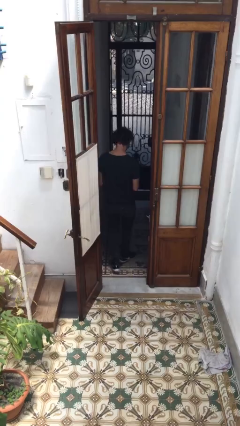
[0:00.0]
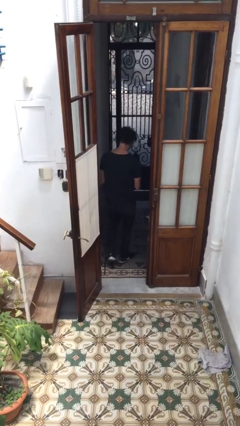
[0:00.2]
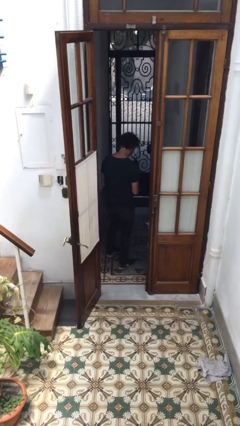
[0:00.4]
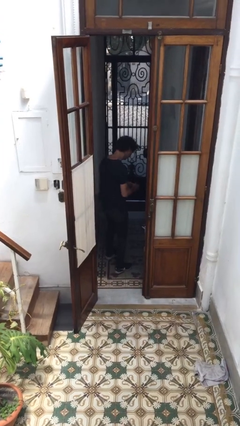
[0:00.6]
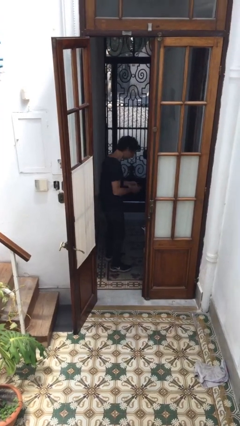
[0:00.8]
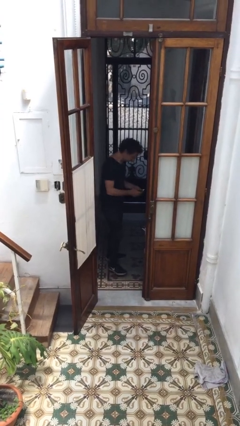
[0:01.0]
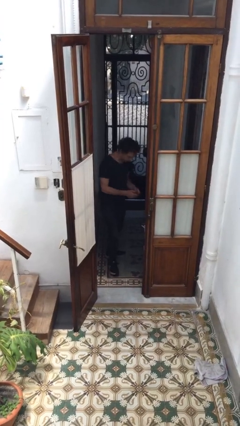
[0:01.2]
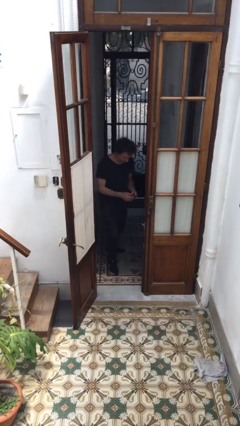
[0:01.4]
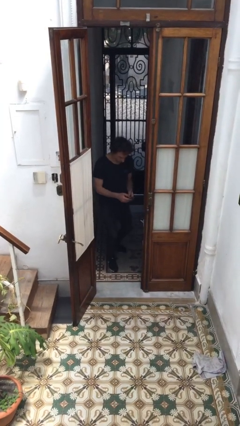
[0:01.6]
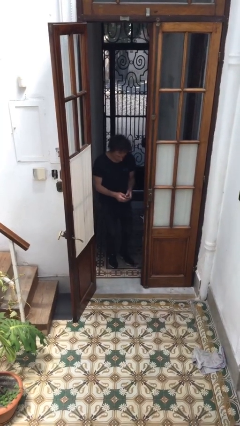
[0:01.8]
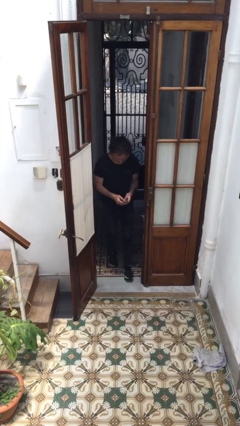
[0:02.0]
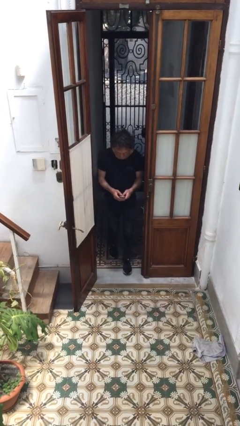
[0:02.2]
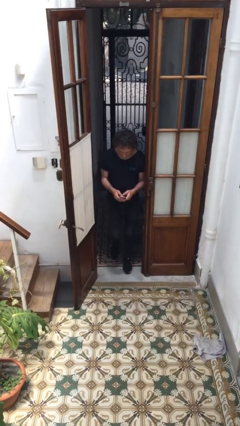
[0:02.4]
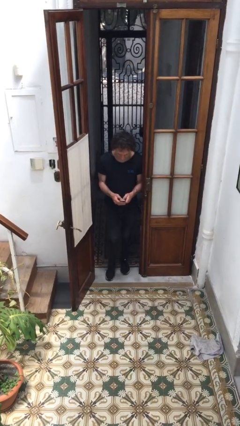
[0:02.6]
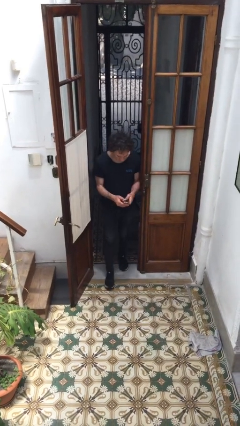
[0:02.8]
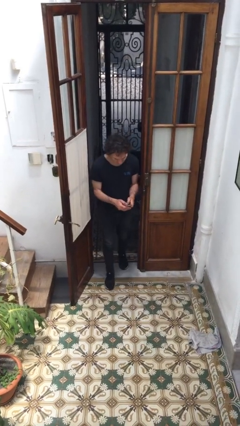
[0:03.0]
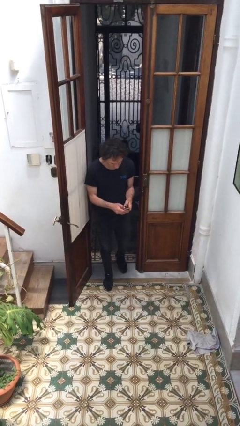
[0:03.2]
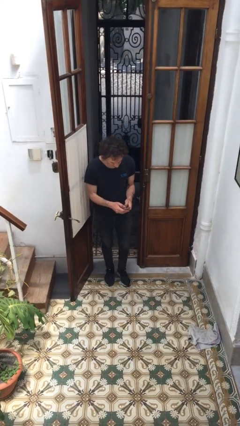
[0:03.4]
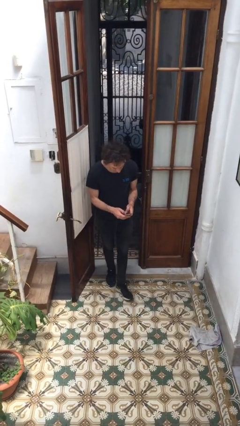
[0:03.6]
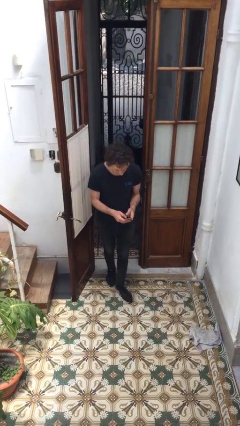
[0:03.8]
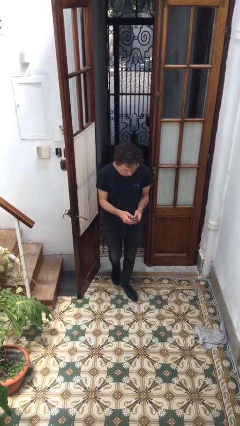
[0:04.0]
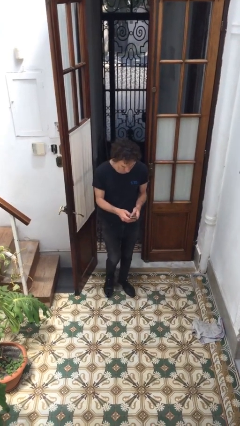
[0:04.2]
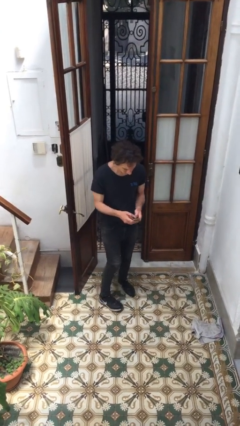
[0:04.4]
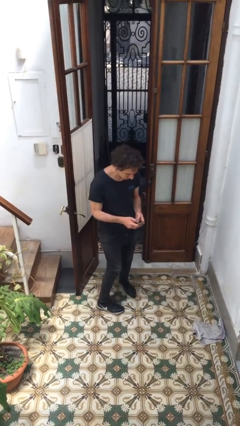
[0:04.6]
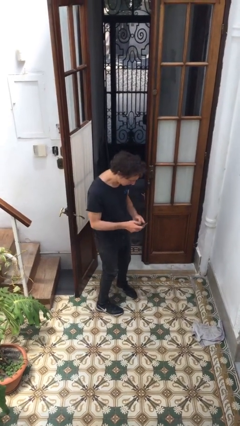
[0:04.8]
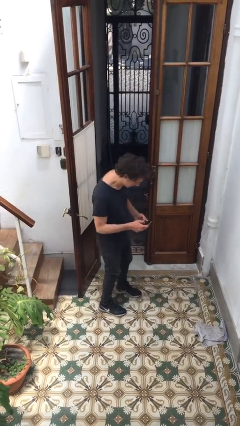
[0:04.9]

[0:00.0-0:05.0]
person enters scene through structure

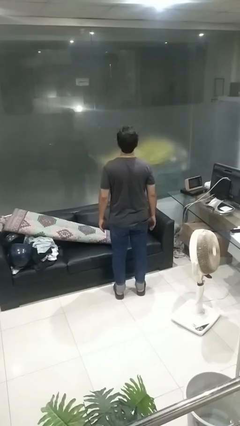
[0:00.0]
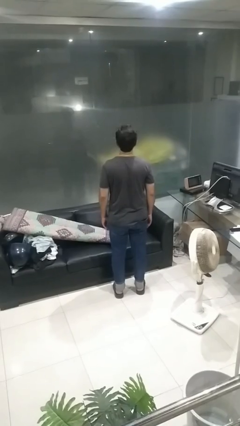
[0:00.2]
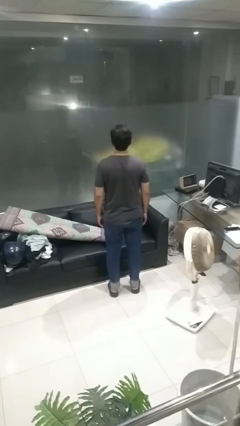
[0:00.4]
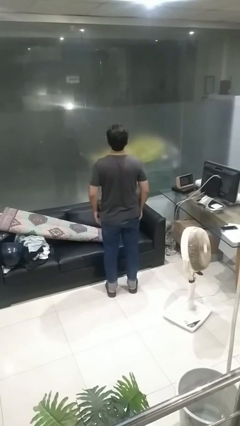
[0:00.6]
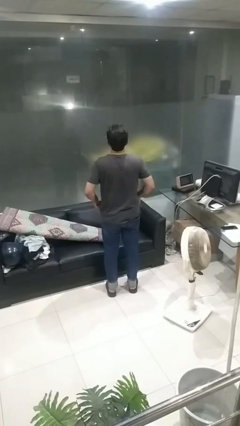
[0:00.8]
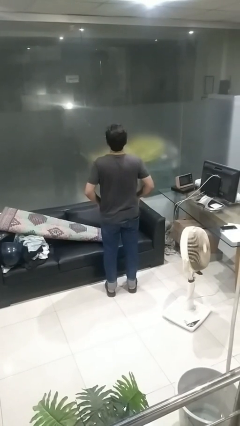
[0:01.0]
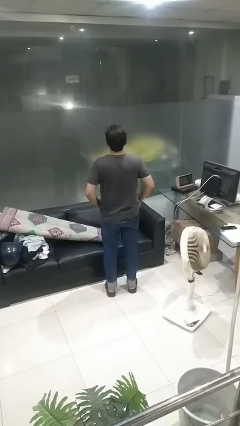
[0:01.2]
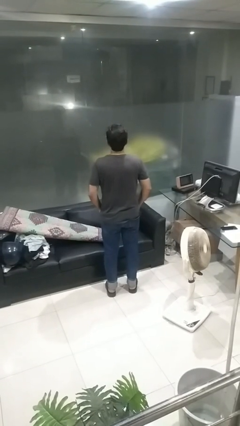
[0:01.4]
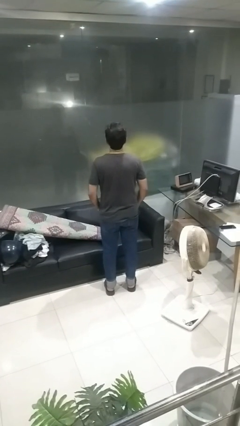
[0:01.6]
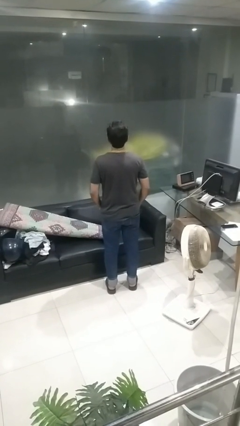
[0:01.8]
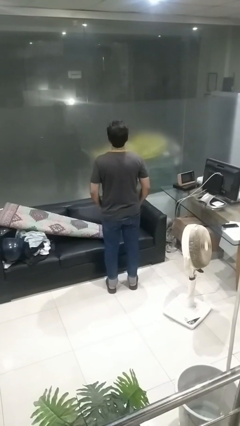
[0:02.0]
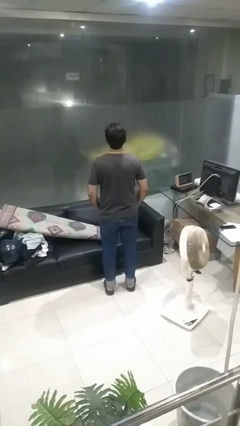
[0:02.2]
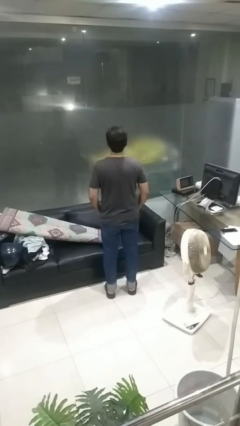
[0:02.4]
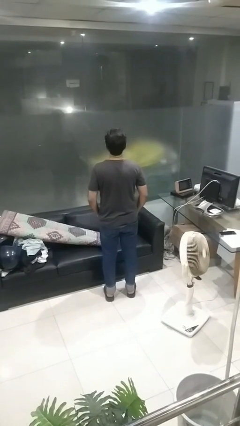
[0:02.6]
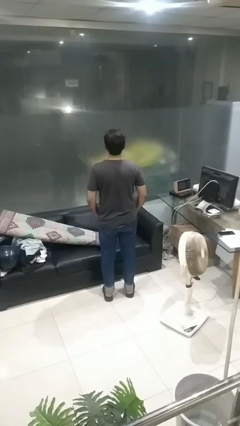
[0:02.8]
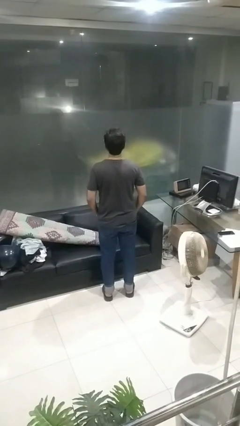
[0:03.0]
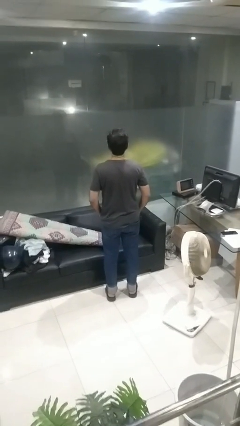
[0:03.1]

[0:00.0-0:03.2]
person puts hands in back pockets

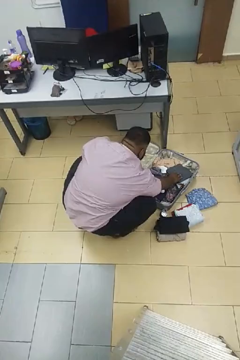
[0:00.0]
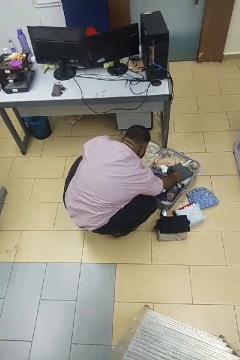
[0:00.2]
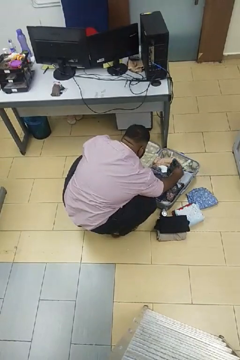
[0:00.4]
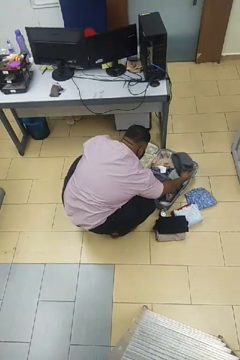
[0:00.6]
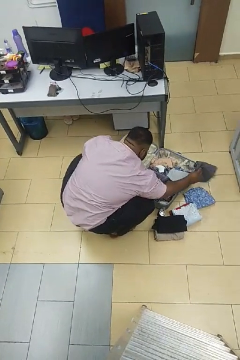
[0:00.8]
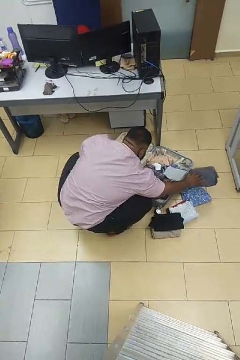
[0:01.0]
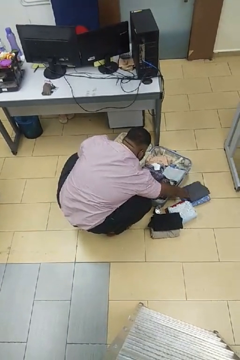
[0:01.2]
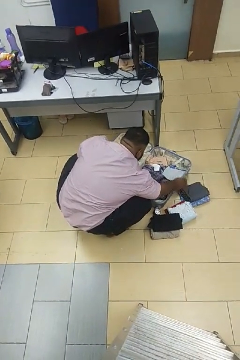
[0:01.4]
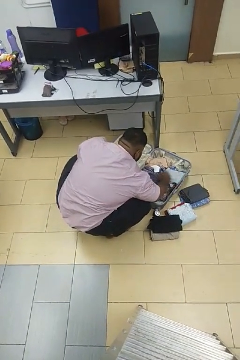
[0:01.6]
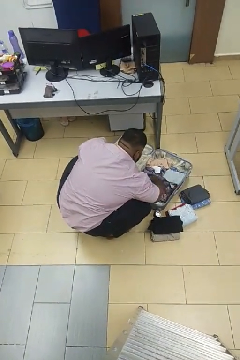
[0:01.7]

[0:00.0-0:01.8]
person unloads clothes from suitcase

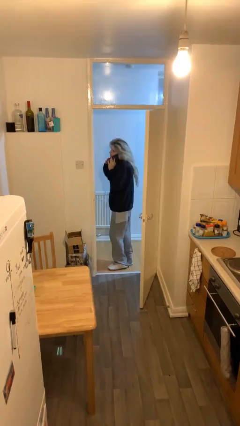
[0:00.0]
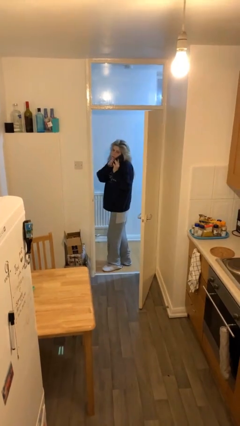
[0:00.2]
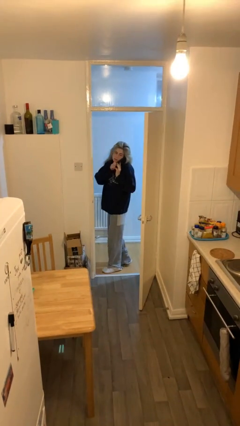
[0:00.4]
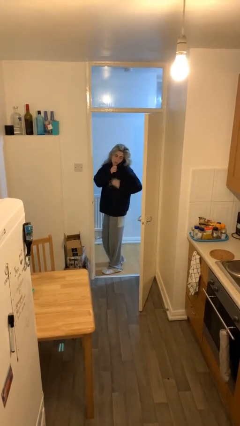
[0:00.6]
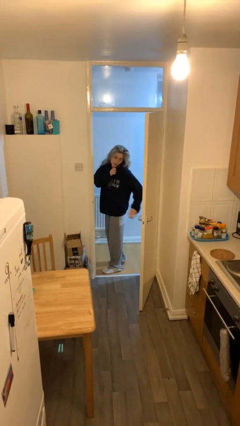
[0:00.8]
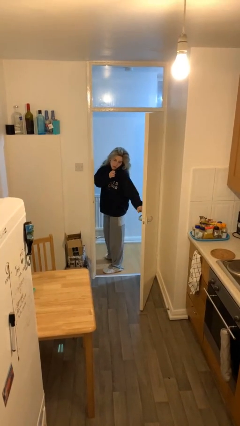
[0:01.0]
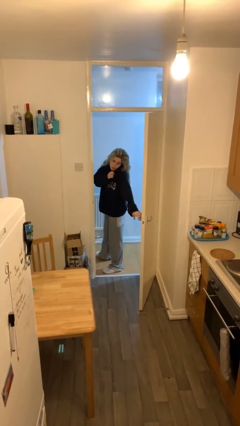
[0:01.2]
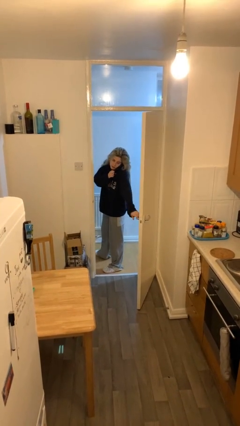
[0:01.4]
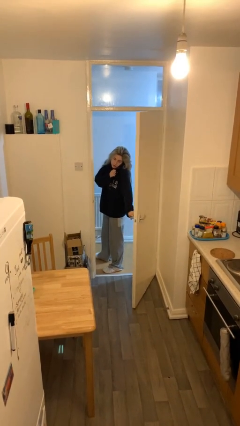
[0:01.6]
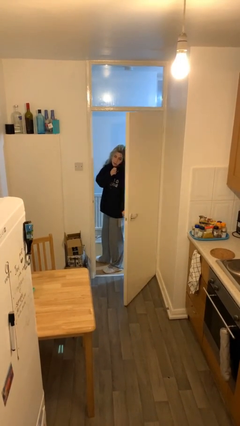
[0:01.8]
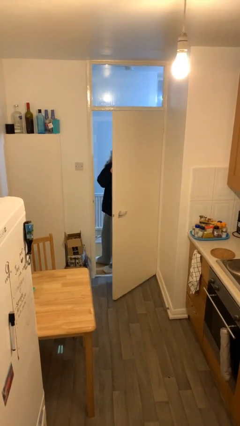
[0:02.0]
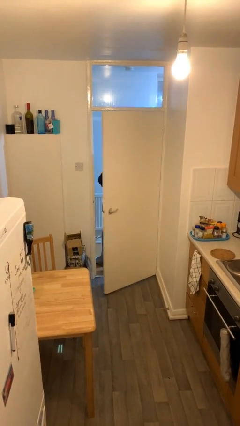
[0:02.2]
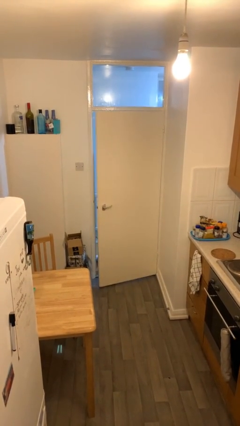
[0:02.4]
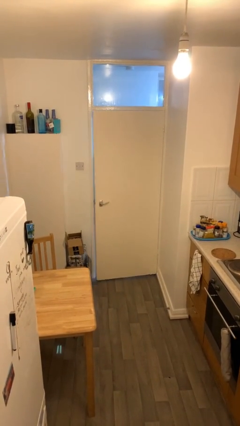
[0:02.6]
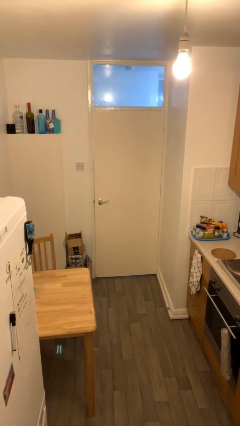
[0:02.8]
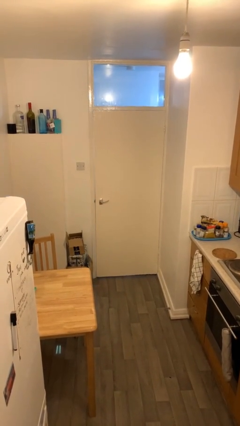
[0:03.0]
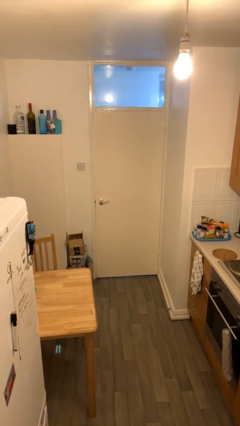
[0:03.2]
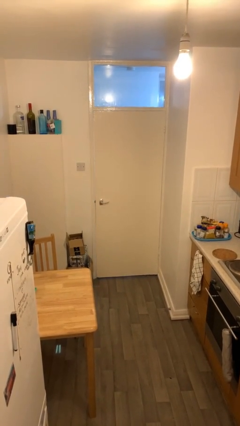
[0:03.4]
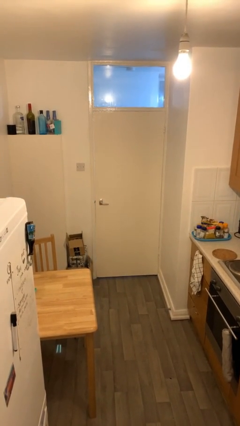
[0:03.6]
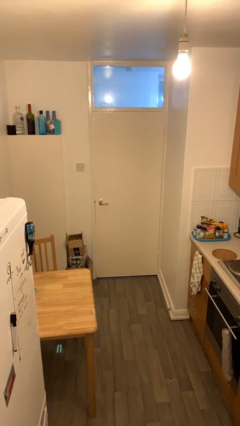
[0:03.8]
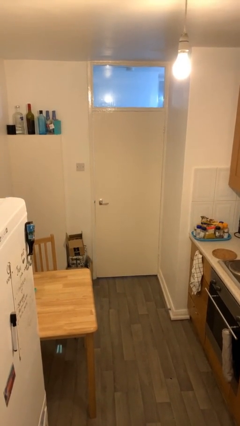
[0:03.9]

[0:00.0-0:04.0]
person closes facility door

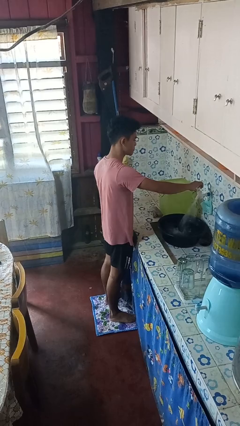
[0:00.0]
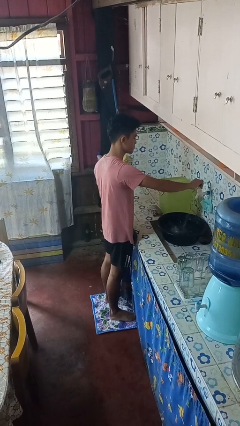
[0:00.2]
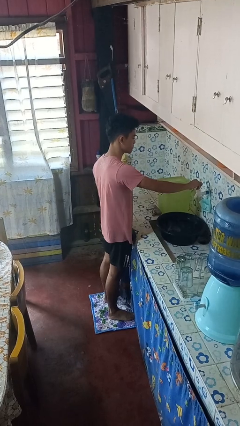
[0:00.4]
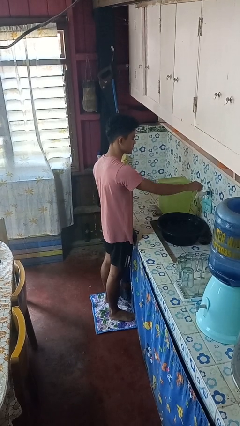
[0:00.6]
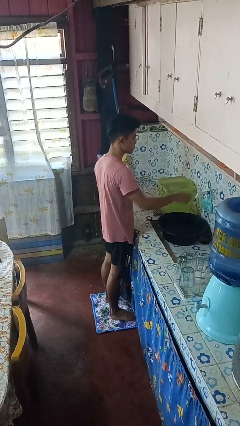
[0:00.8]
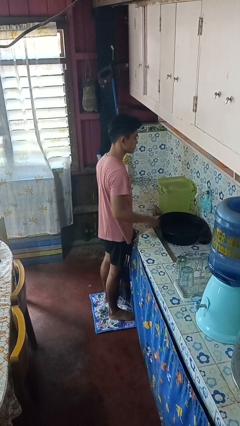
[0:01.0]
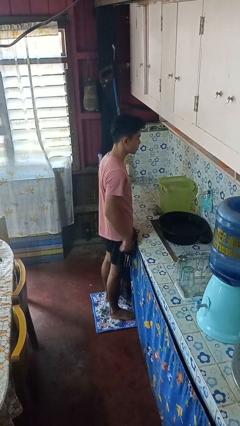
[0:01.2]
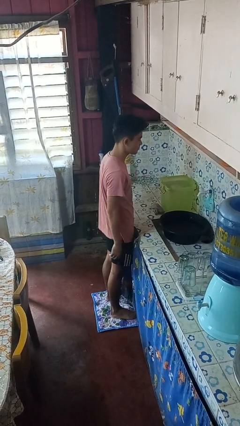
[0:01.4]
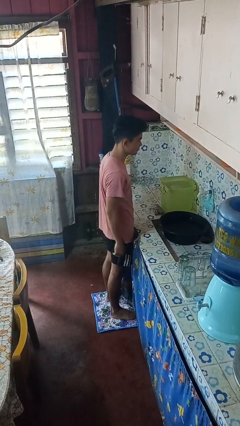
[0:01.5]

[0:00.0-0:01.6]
person turns off faucet

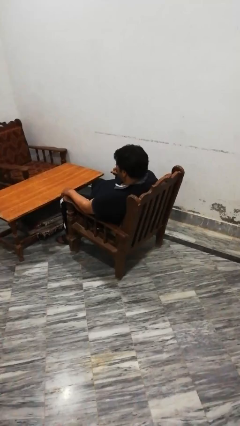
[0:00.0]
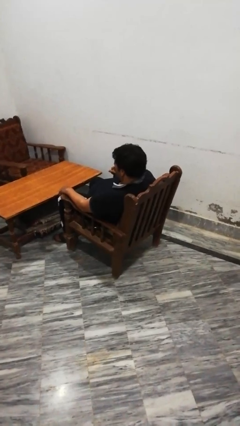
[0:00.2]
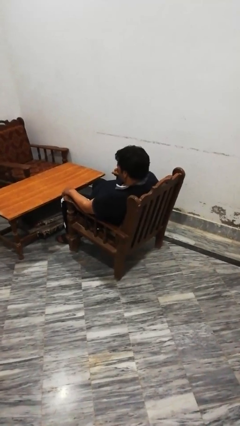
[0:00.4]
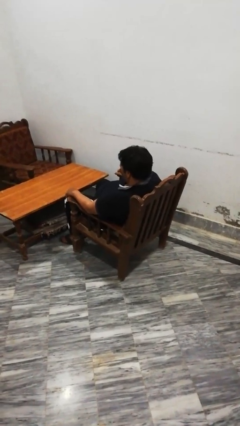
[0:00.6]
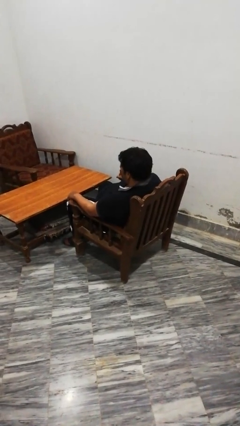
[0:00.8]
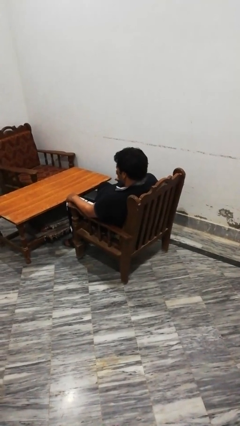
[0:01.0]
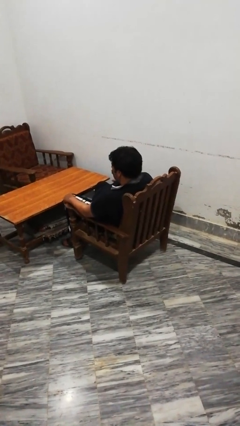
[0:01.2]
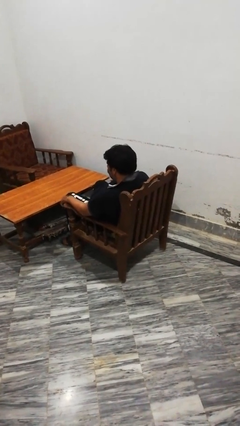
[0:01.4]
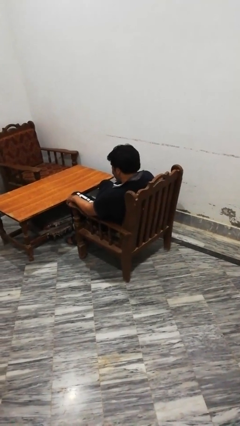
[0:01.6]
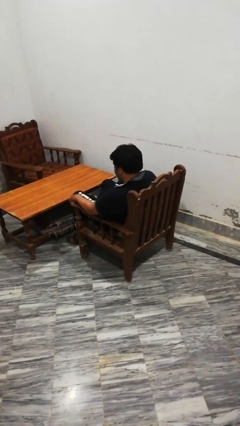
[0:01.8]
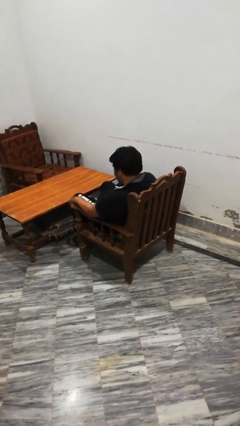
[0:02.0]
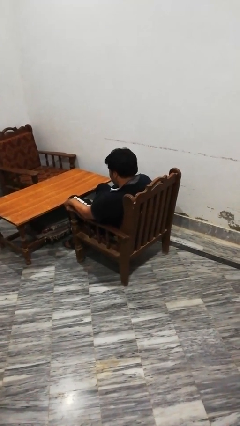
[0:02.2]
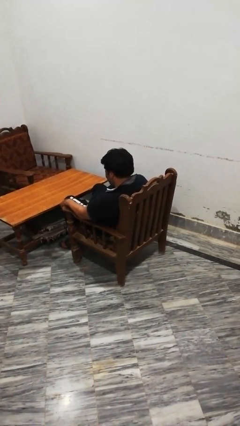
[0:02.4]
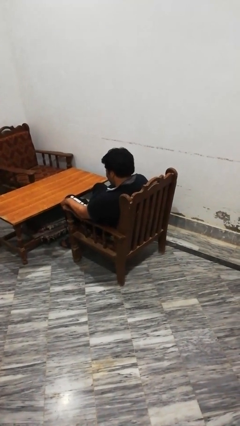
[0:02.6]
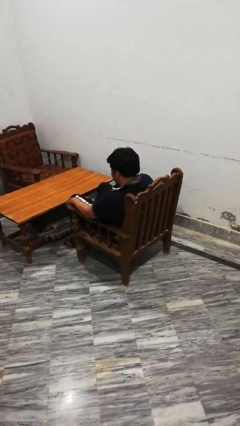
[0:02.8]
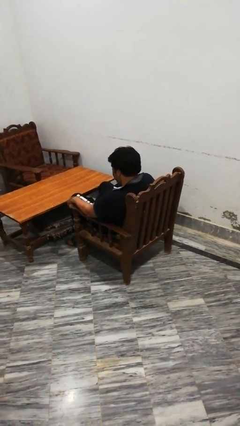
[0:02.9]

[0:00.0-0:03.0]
person pushes in chair
